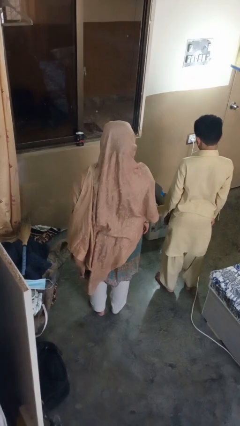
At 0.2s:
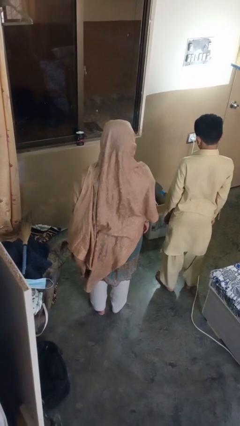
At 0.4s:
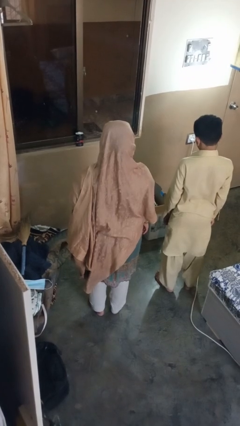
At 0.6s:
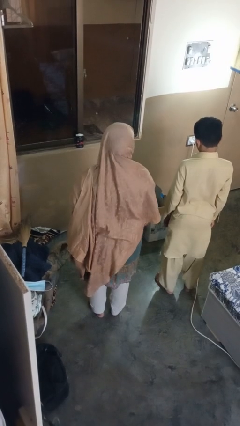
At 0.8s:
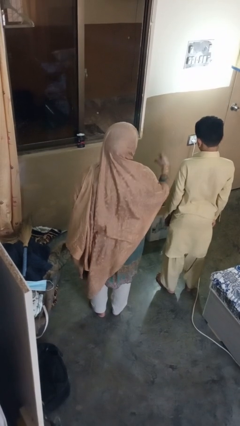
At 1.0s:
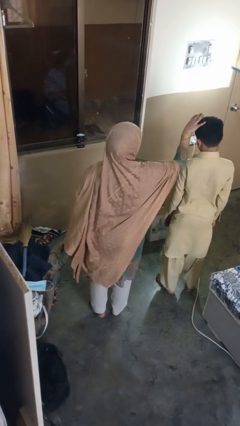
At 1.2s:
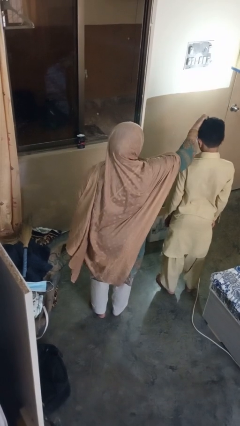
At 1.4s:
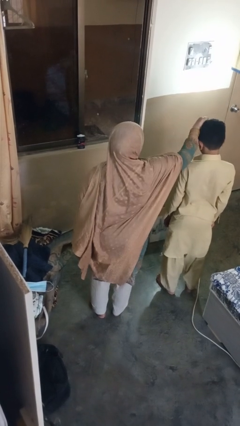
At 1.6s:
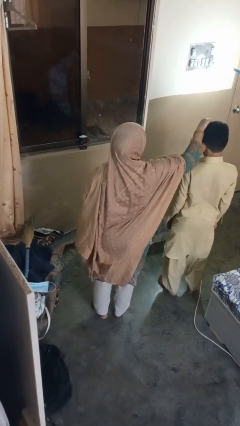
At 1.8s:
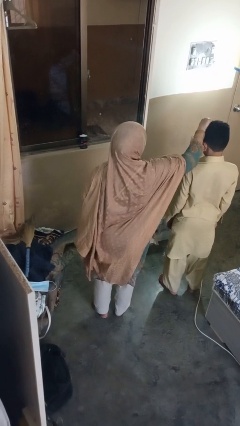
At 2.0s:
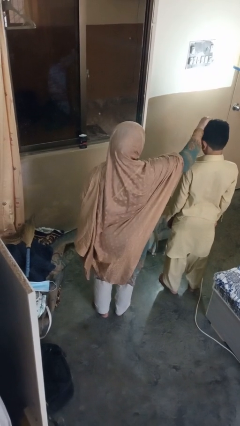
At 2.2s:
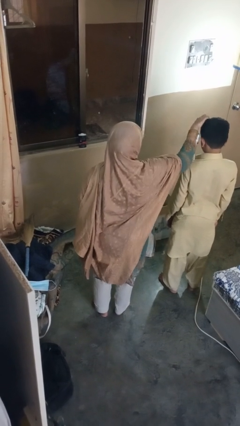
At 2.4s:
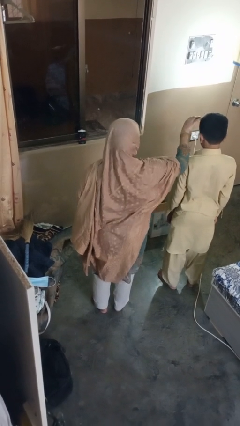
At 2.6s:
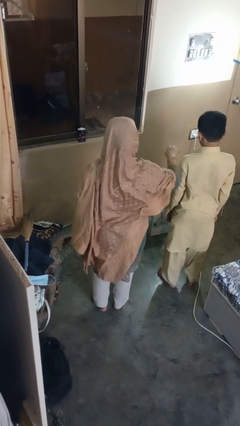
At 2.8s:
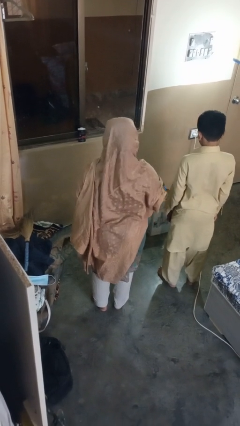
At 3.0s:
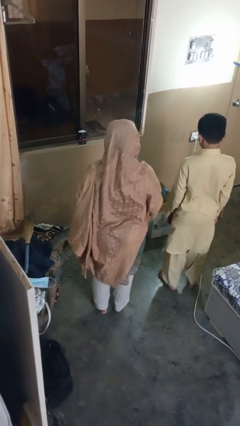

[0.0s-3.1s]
person grabs person by hair

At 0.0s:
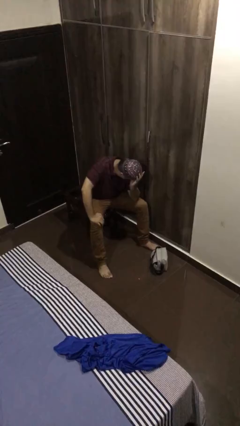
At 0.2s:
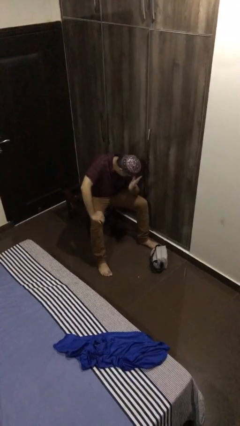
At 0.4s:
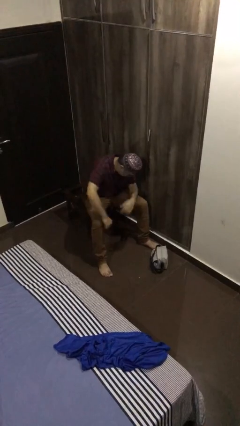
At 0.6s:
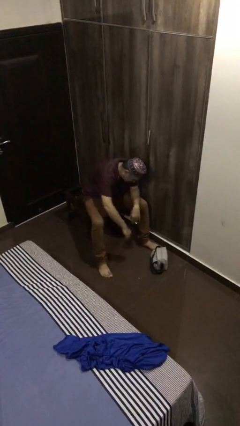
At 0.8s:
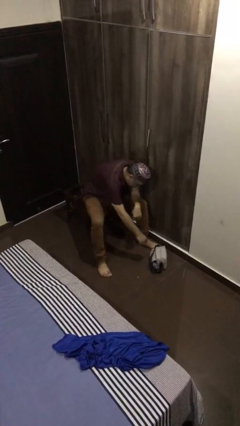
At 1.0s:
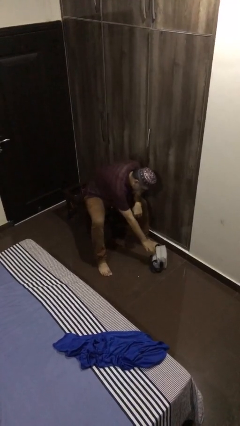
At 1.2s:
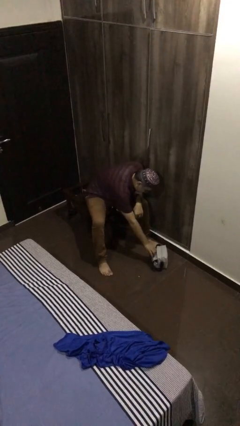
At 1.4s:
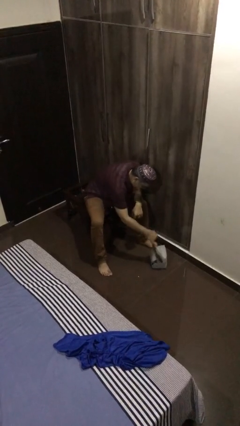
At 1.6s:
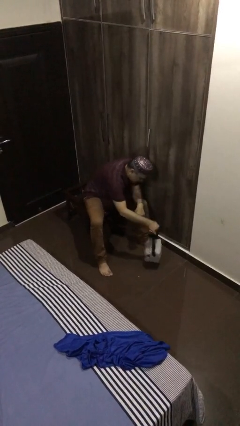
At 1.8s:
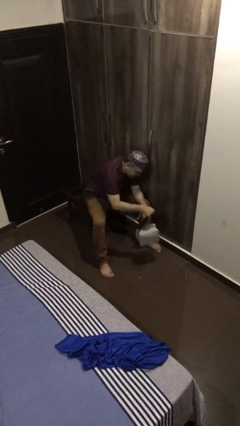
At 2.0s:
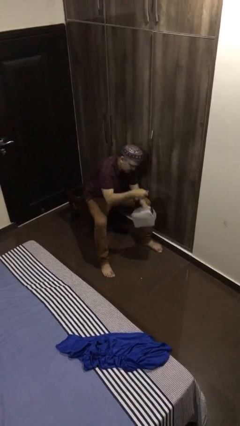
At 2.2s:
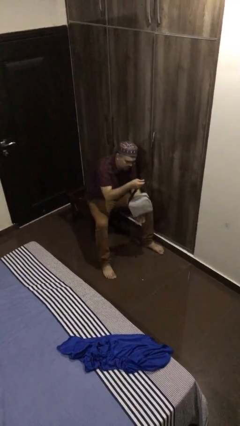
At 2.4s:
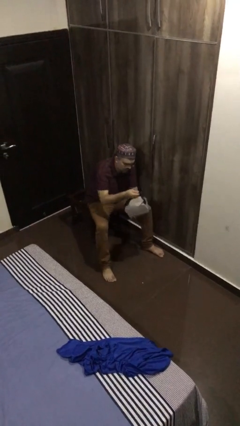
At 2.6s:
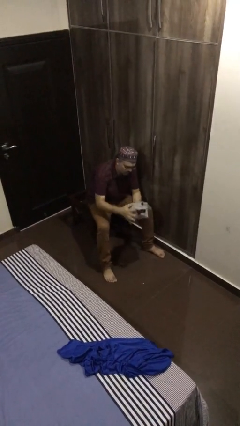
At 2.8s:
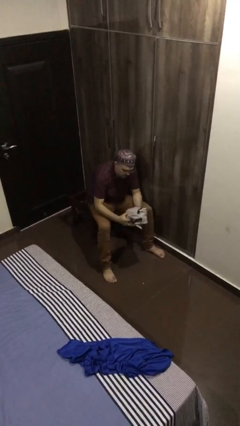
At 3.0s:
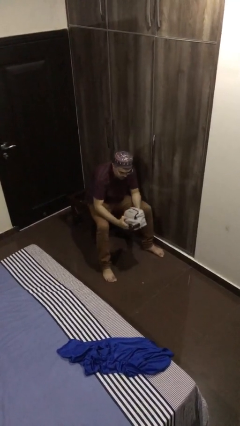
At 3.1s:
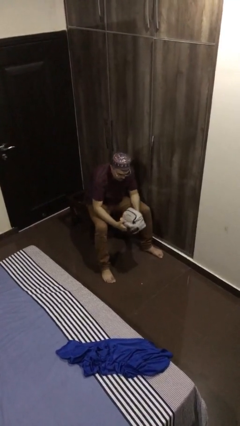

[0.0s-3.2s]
person picks up object from floor

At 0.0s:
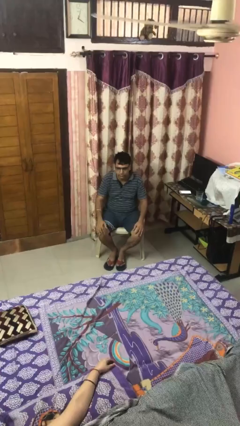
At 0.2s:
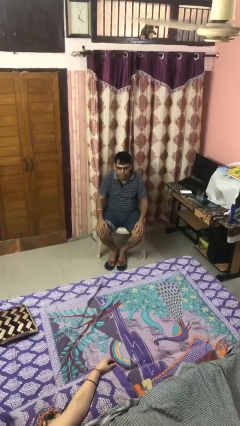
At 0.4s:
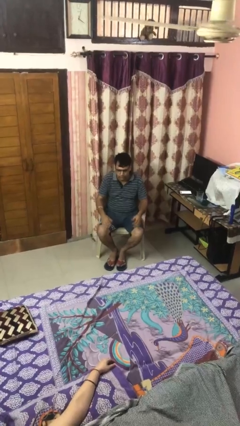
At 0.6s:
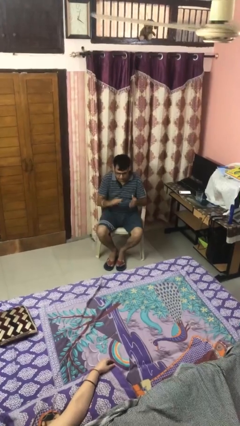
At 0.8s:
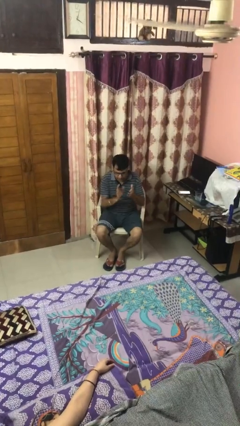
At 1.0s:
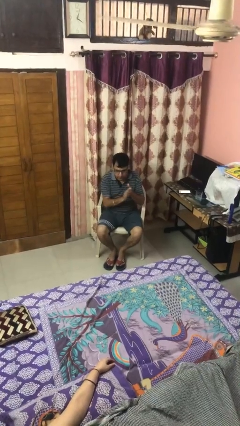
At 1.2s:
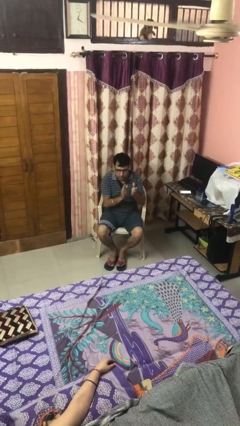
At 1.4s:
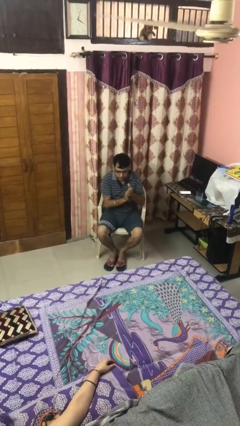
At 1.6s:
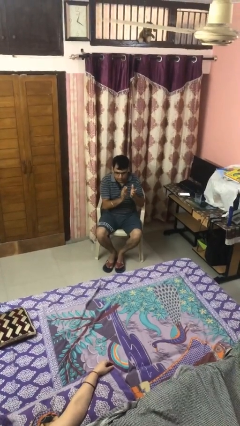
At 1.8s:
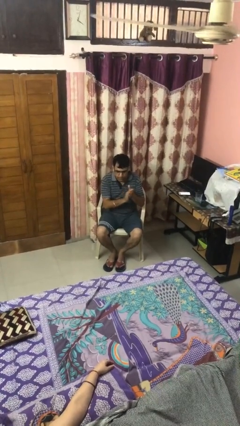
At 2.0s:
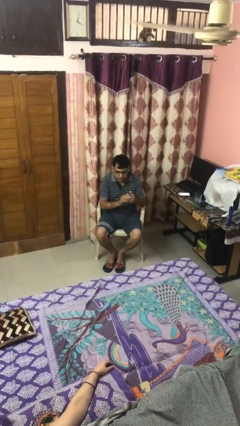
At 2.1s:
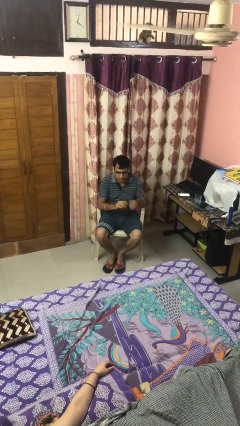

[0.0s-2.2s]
person claps hands

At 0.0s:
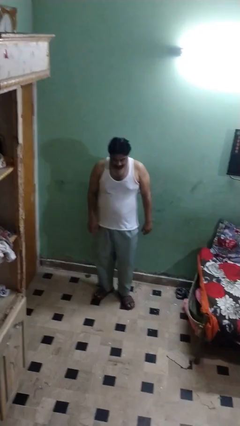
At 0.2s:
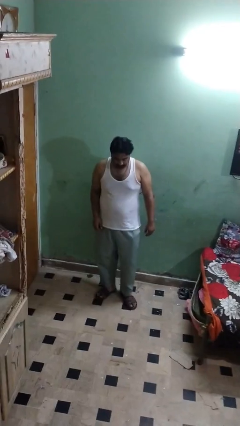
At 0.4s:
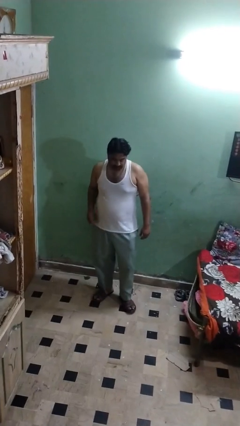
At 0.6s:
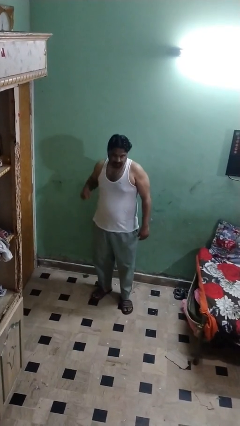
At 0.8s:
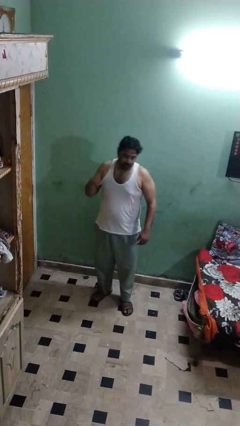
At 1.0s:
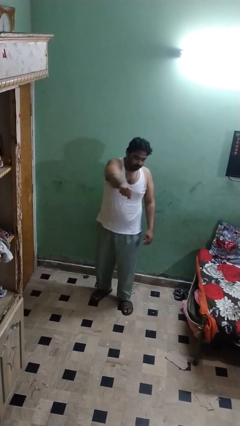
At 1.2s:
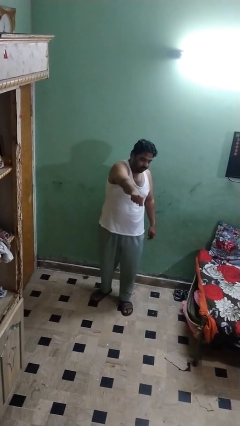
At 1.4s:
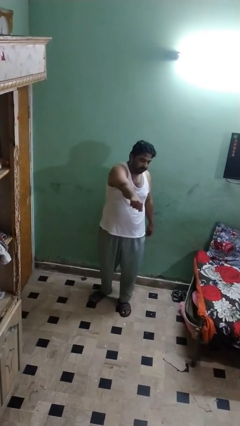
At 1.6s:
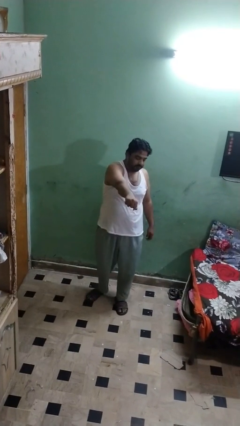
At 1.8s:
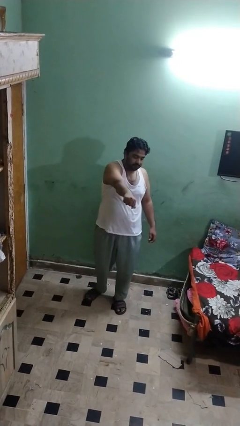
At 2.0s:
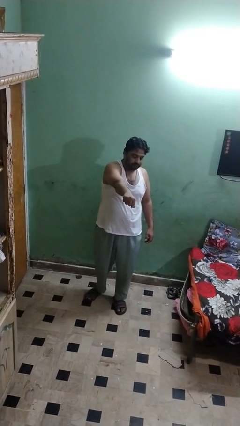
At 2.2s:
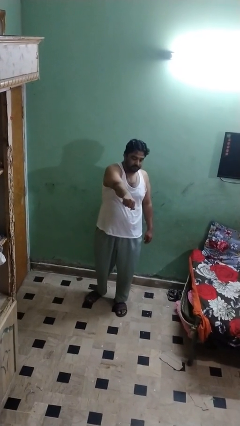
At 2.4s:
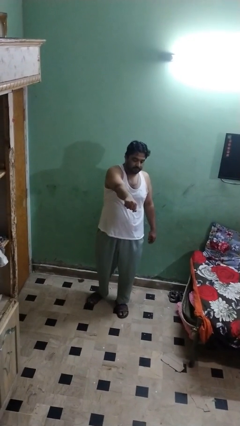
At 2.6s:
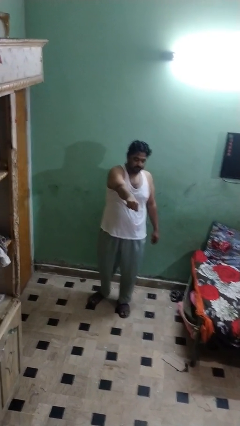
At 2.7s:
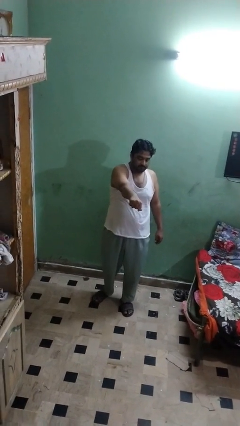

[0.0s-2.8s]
person punches

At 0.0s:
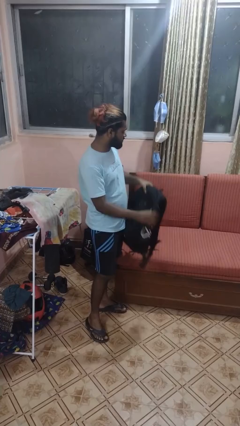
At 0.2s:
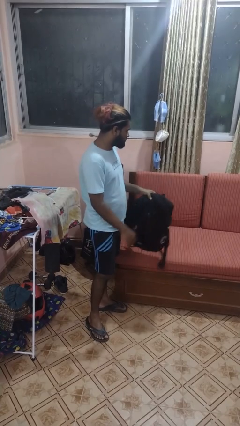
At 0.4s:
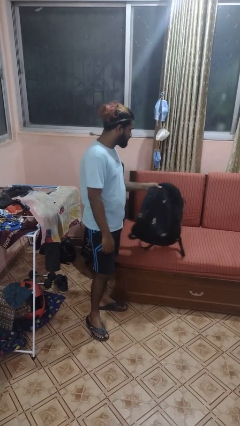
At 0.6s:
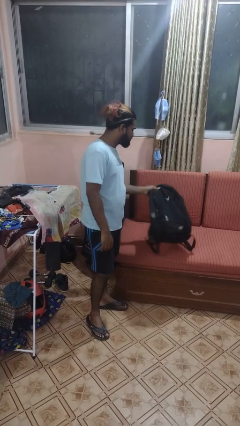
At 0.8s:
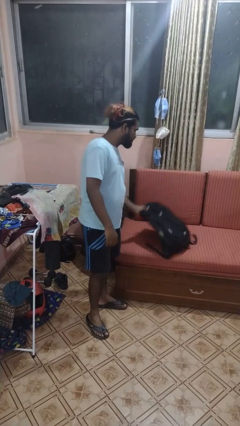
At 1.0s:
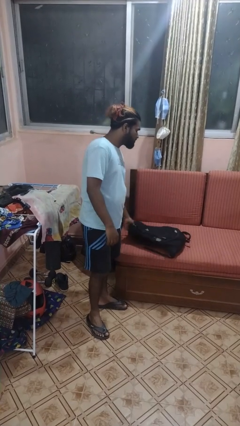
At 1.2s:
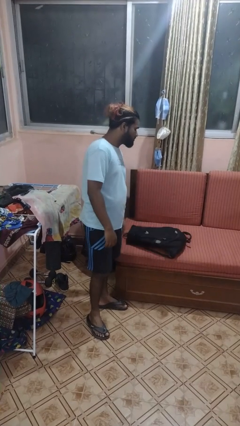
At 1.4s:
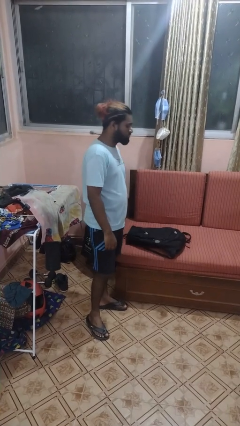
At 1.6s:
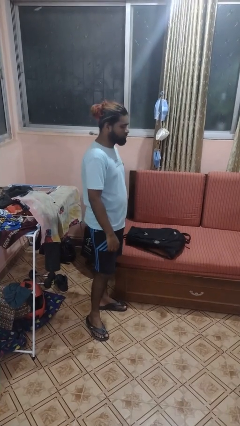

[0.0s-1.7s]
person puts down object on couch

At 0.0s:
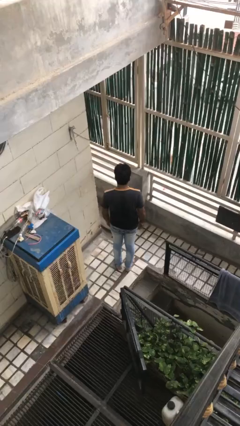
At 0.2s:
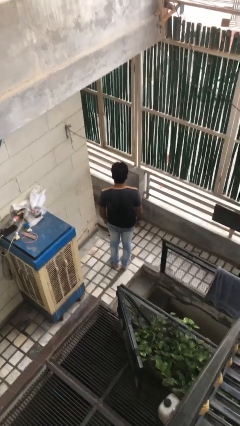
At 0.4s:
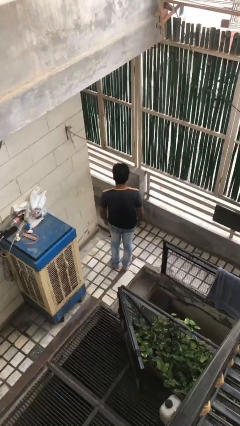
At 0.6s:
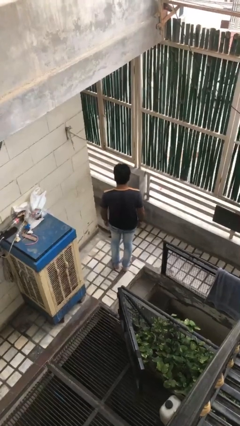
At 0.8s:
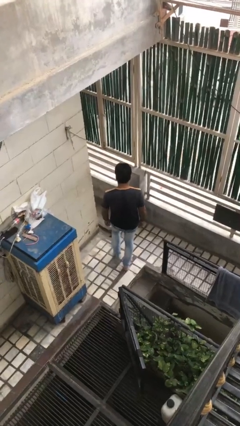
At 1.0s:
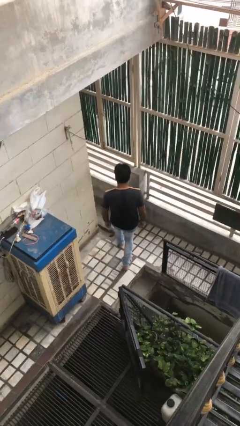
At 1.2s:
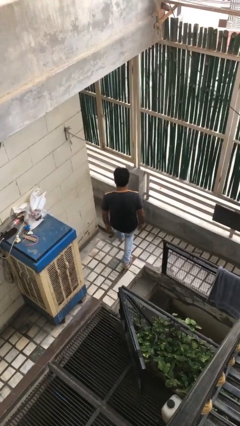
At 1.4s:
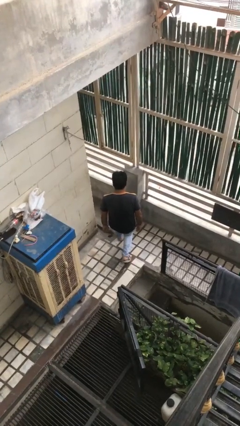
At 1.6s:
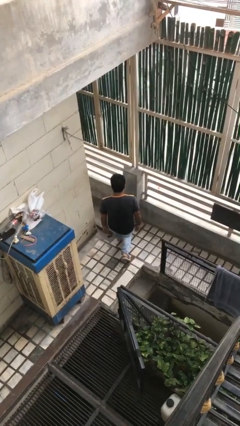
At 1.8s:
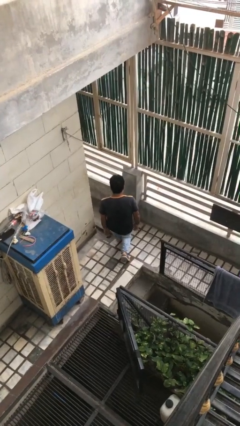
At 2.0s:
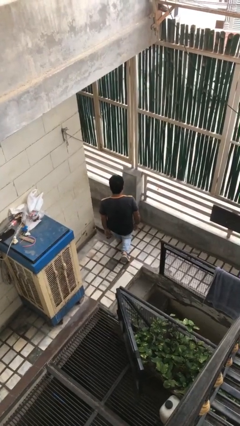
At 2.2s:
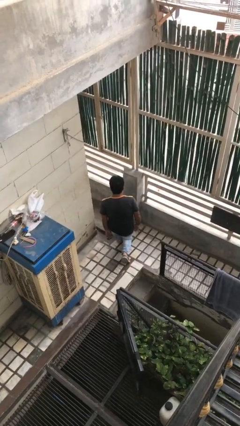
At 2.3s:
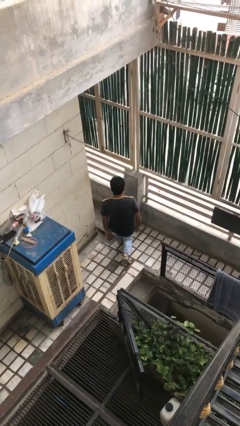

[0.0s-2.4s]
person kneels

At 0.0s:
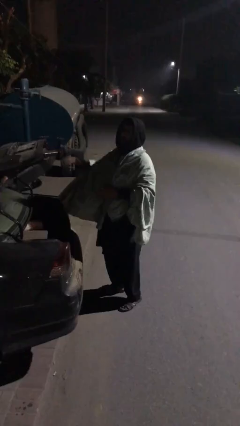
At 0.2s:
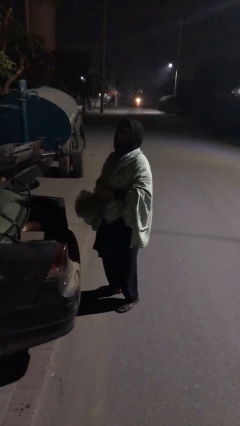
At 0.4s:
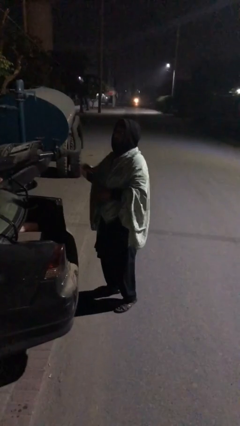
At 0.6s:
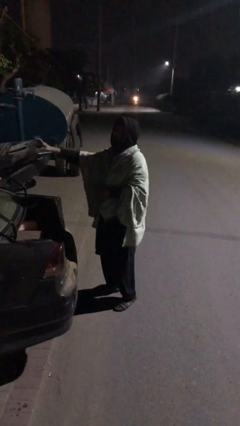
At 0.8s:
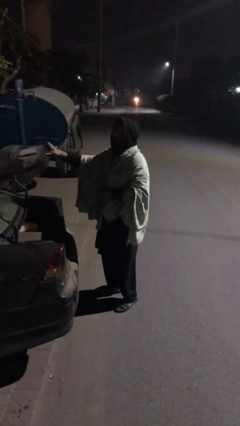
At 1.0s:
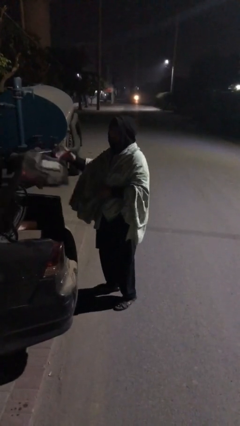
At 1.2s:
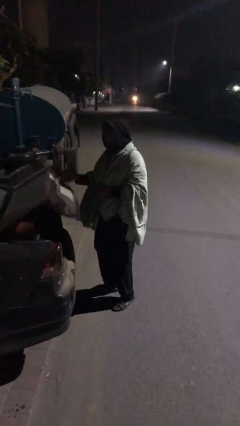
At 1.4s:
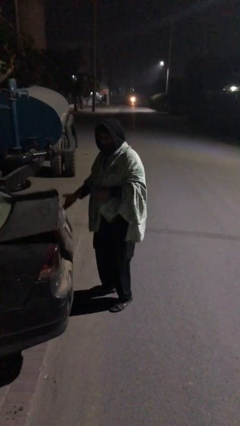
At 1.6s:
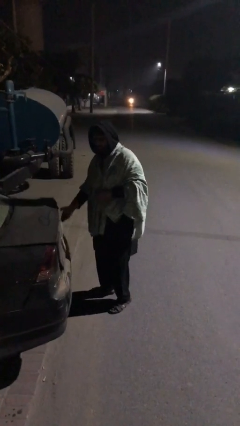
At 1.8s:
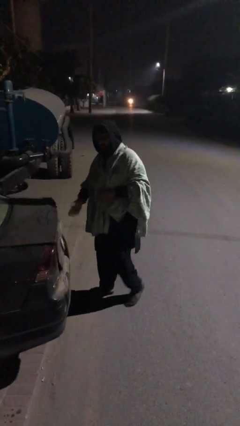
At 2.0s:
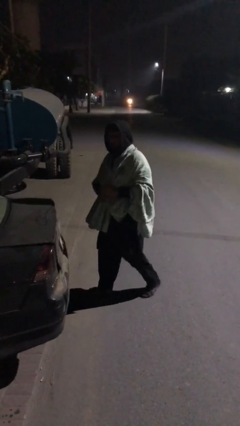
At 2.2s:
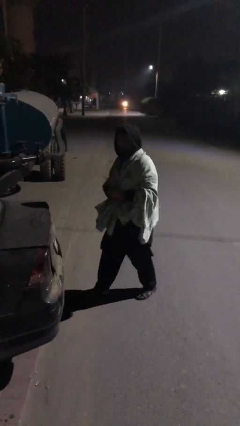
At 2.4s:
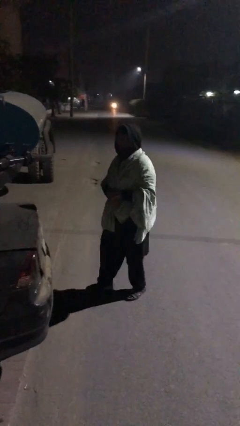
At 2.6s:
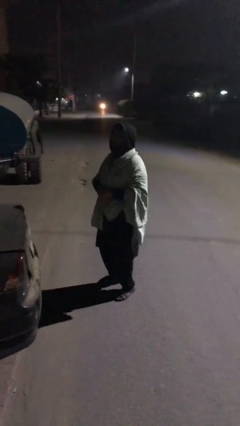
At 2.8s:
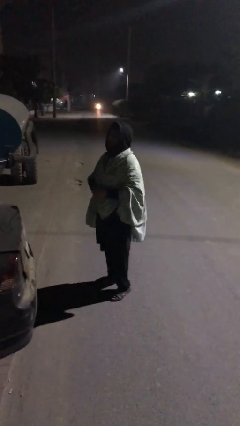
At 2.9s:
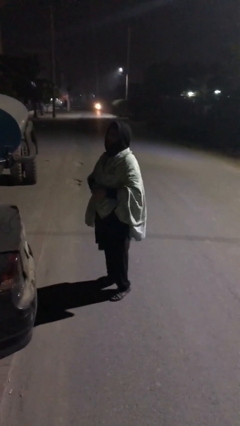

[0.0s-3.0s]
person closes car trunk
